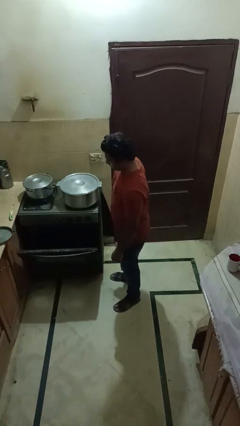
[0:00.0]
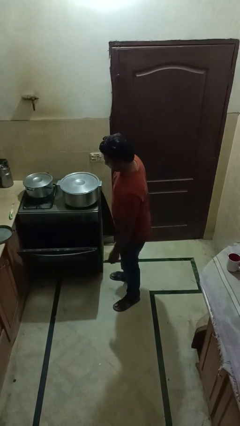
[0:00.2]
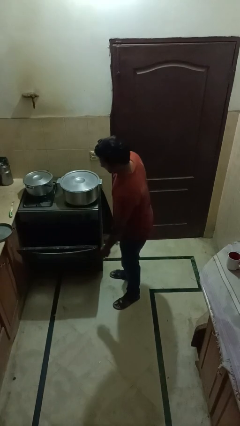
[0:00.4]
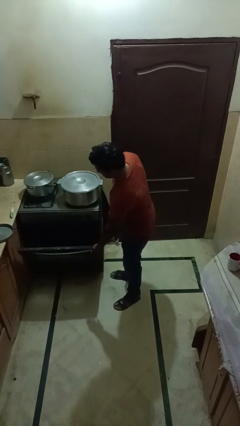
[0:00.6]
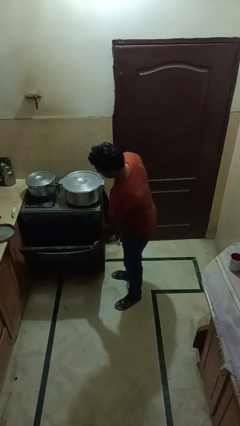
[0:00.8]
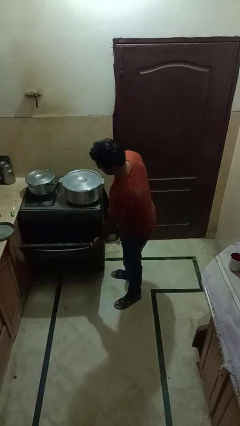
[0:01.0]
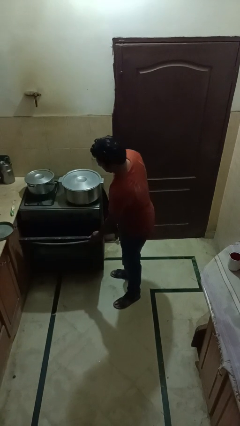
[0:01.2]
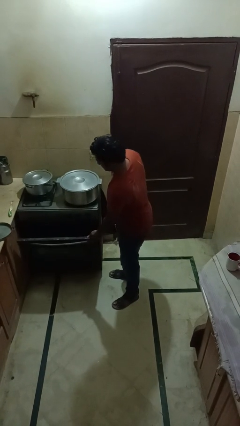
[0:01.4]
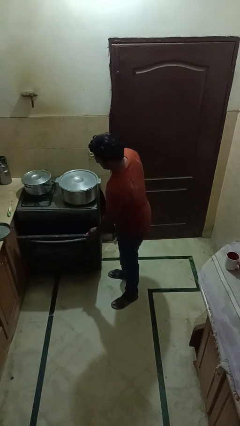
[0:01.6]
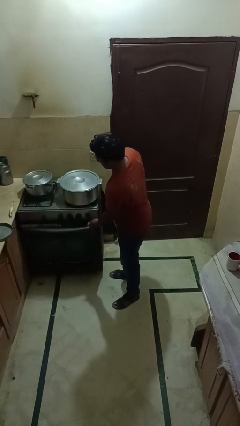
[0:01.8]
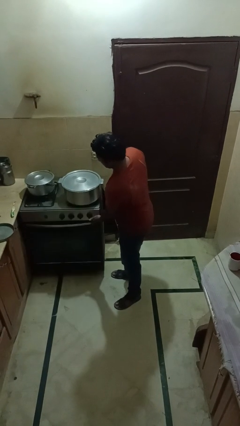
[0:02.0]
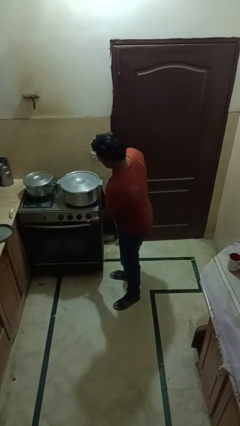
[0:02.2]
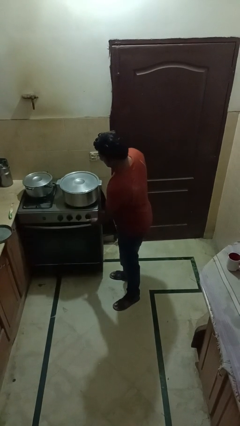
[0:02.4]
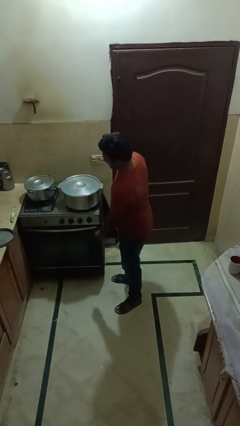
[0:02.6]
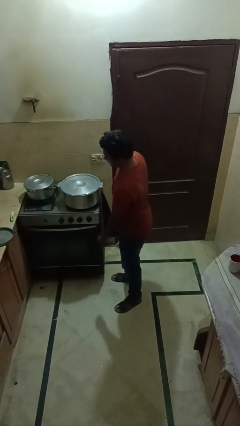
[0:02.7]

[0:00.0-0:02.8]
person closes oven door

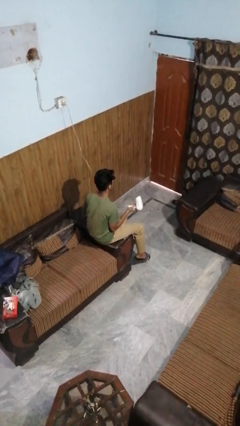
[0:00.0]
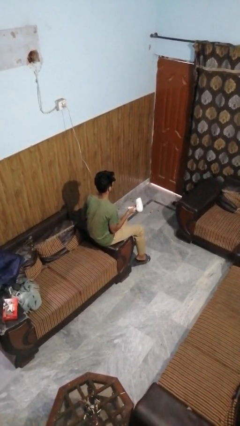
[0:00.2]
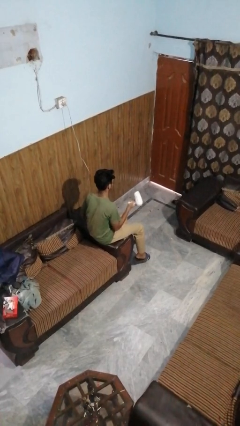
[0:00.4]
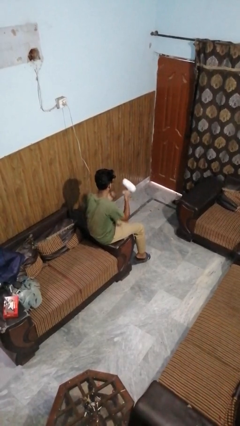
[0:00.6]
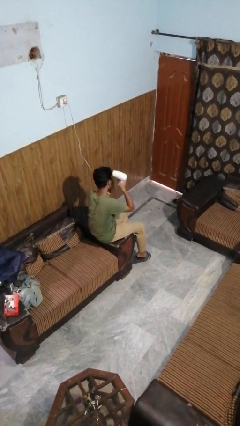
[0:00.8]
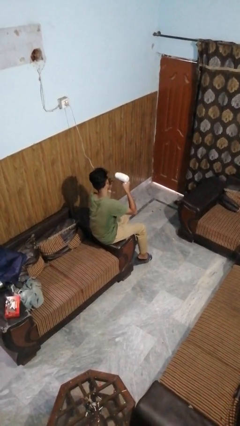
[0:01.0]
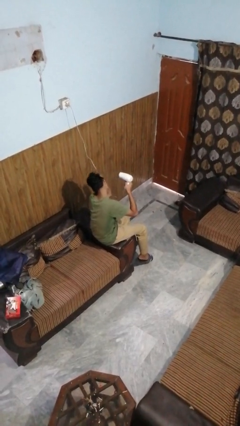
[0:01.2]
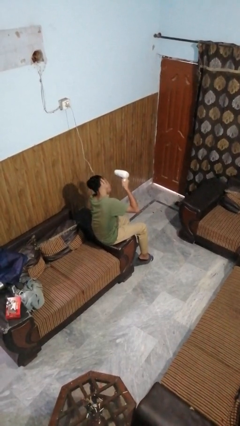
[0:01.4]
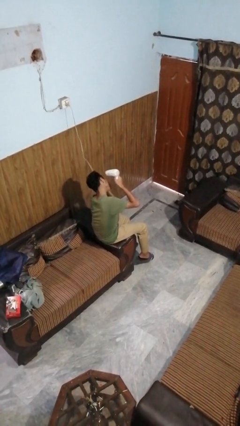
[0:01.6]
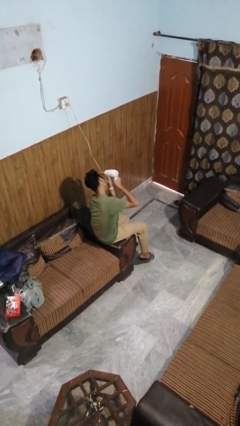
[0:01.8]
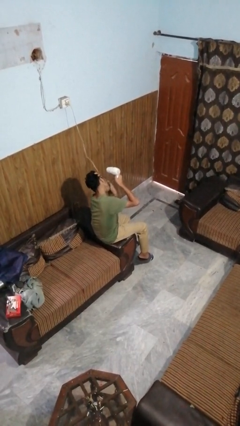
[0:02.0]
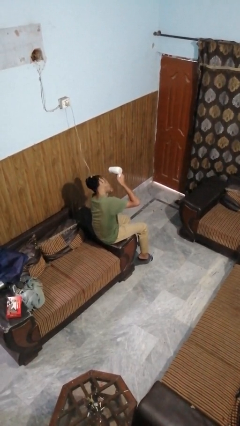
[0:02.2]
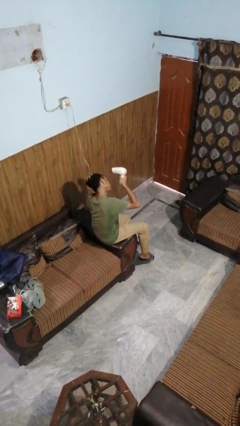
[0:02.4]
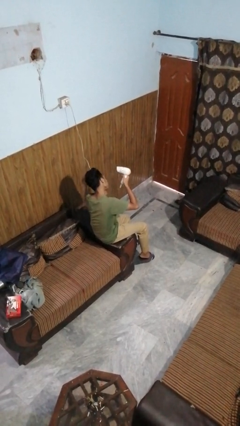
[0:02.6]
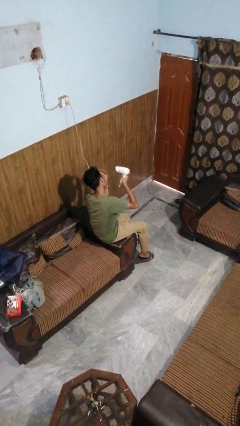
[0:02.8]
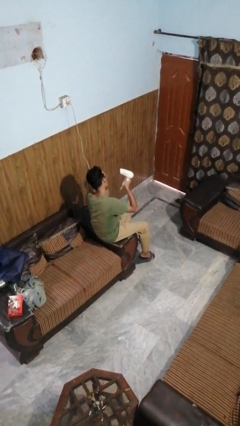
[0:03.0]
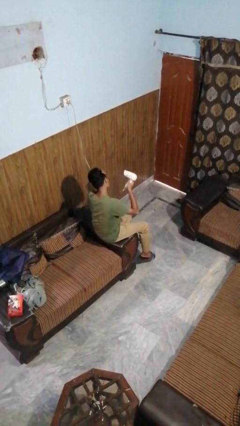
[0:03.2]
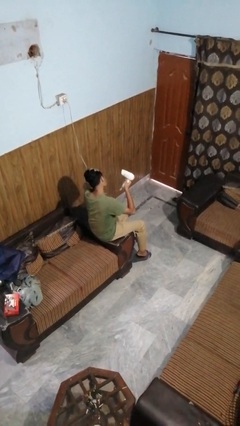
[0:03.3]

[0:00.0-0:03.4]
person dries hair with hairdryer

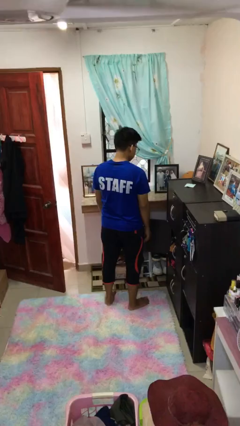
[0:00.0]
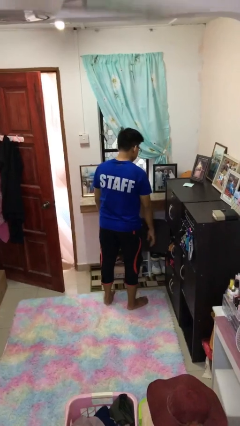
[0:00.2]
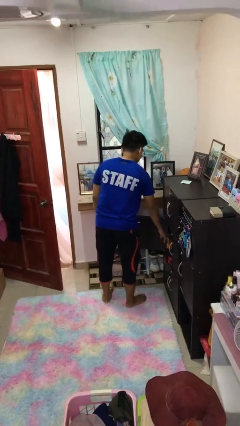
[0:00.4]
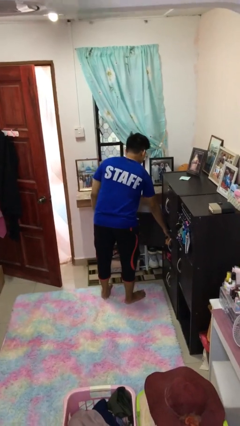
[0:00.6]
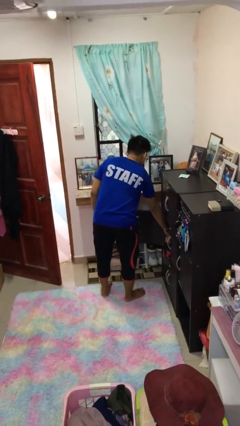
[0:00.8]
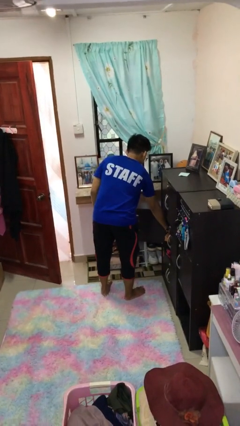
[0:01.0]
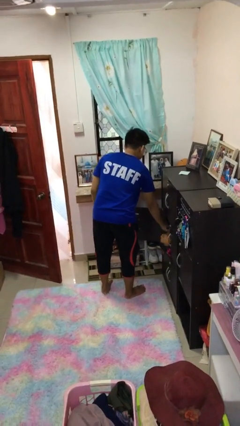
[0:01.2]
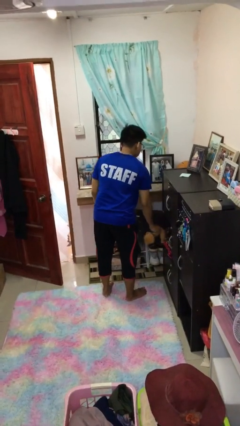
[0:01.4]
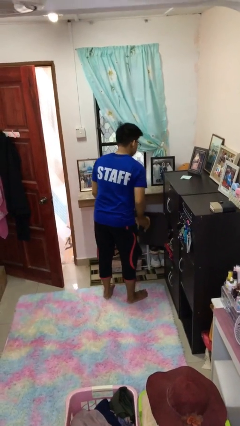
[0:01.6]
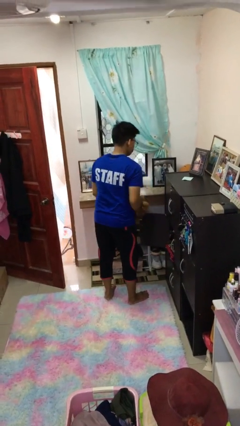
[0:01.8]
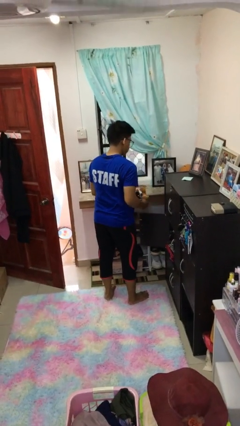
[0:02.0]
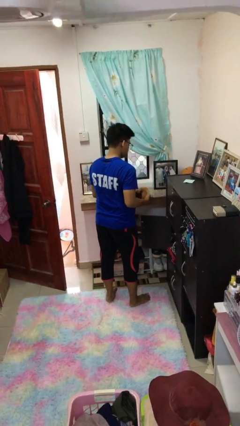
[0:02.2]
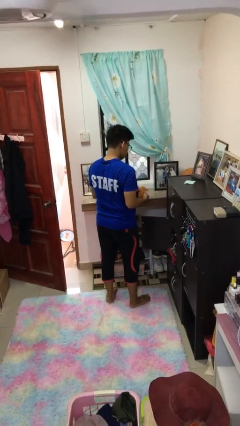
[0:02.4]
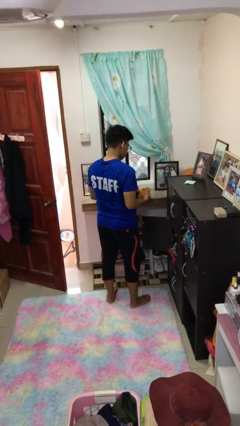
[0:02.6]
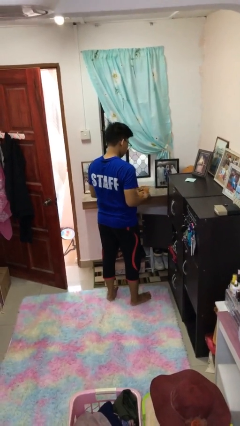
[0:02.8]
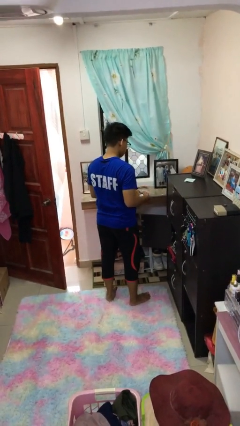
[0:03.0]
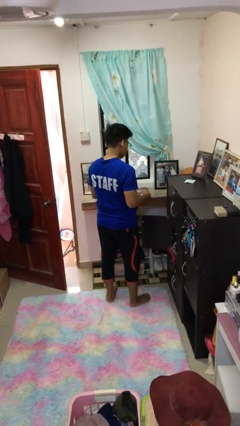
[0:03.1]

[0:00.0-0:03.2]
person picks up object from cabinet

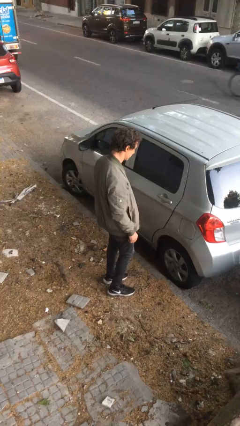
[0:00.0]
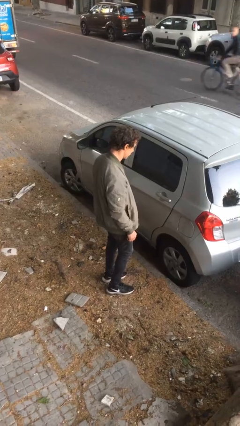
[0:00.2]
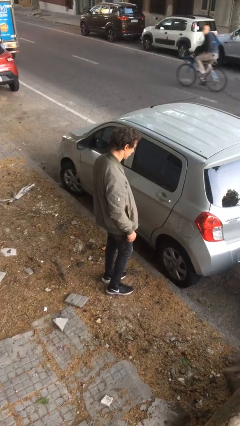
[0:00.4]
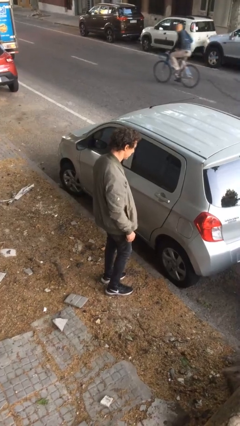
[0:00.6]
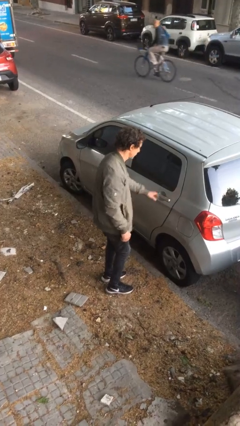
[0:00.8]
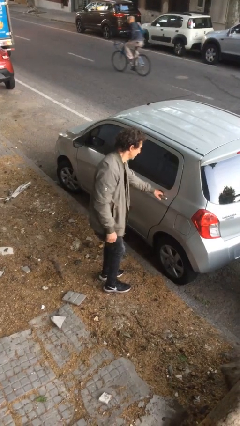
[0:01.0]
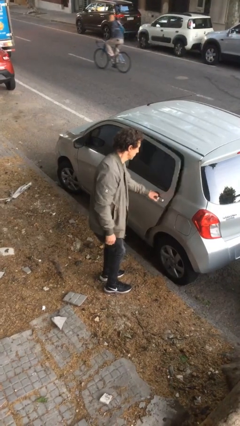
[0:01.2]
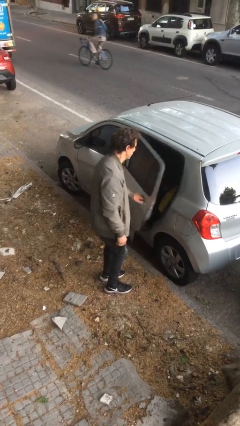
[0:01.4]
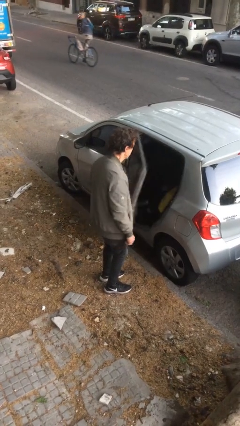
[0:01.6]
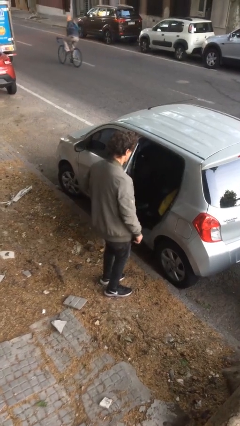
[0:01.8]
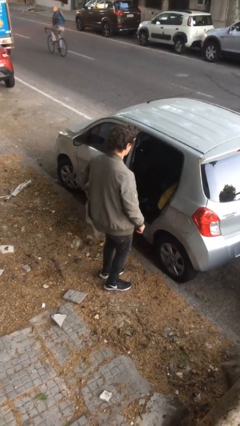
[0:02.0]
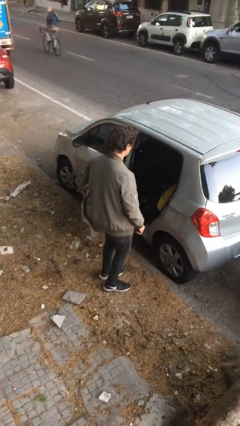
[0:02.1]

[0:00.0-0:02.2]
person opens car door

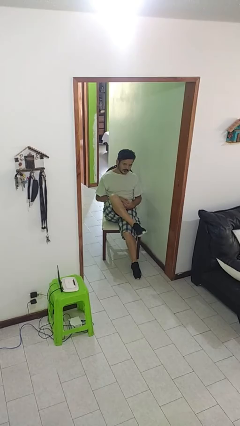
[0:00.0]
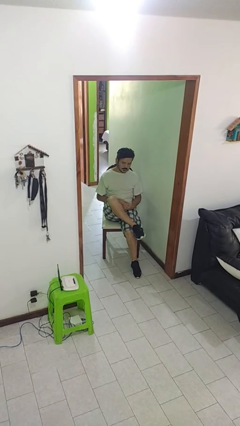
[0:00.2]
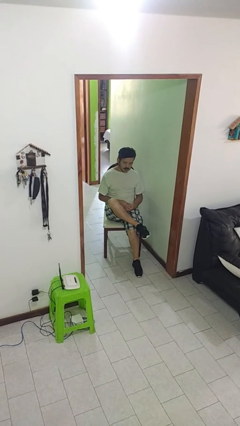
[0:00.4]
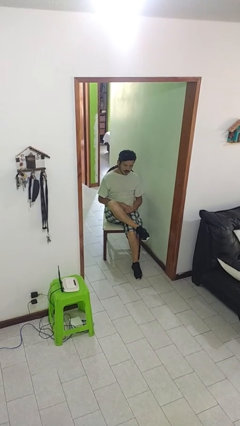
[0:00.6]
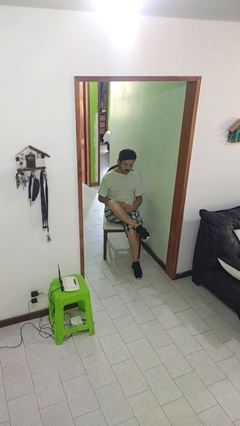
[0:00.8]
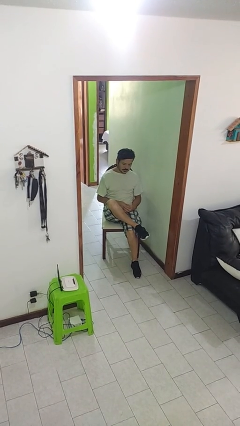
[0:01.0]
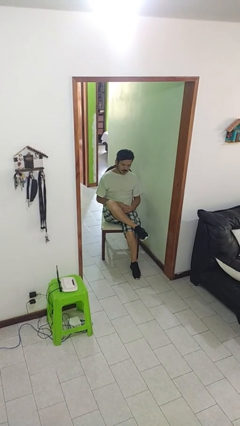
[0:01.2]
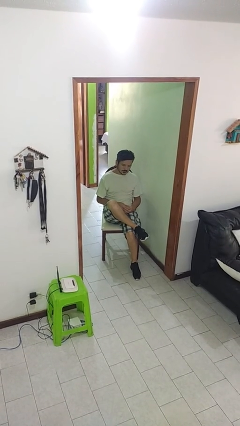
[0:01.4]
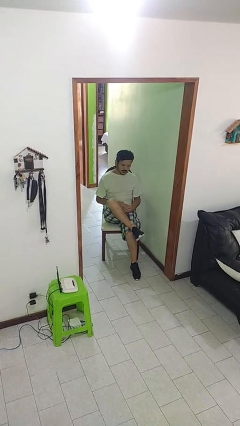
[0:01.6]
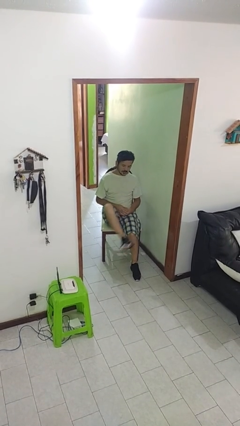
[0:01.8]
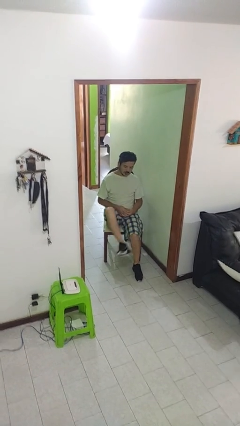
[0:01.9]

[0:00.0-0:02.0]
person crosses legs

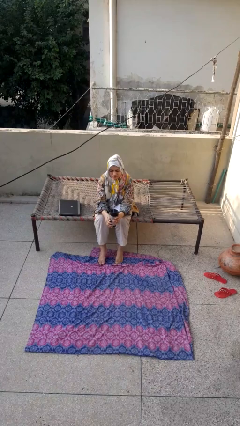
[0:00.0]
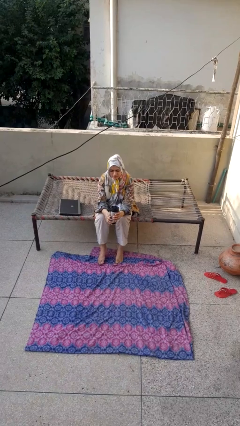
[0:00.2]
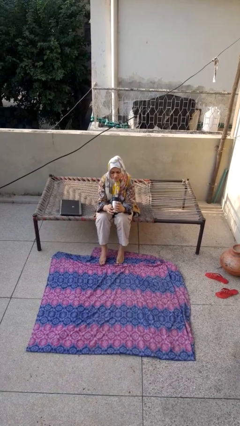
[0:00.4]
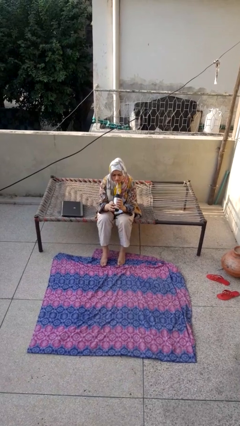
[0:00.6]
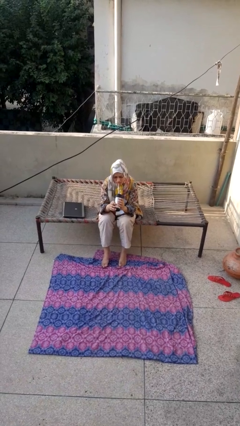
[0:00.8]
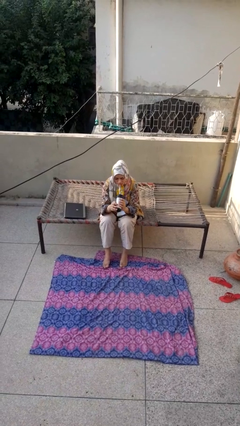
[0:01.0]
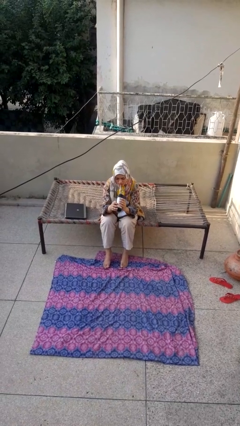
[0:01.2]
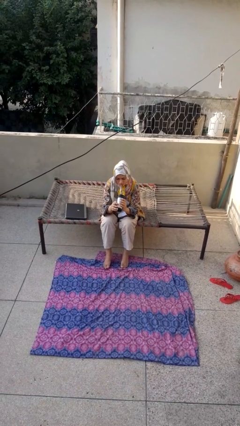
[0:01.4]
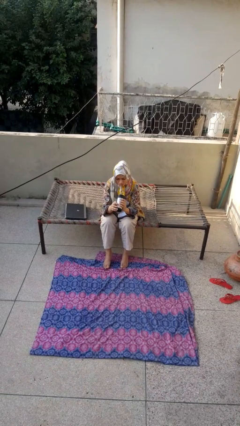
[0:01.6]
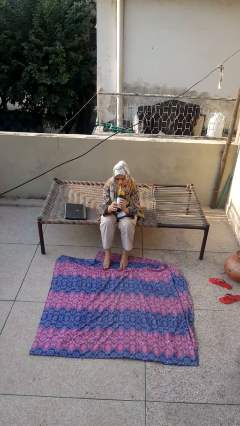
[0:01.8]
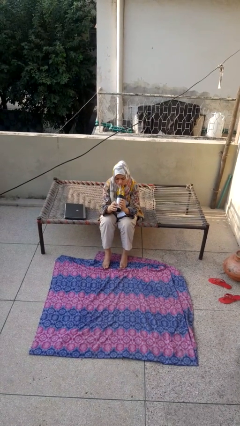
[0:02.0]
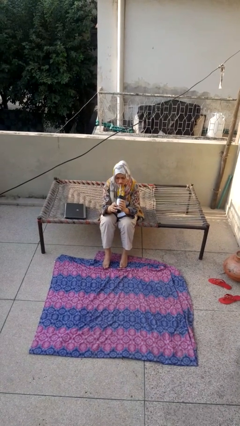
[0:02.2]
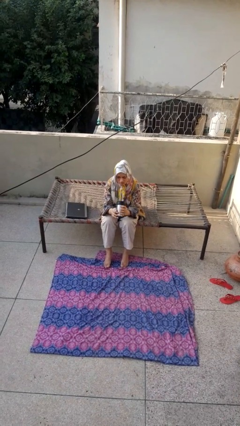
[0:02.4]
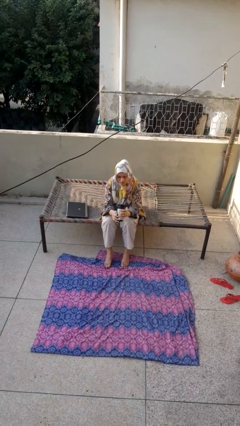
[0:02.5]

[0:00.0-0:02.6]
person drinks from straw

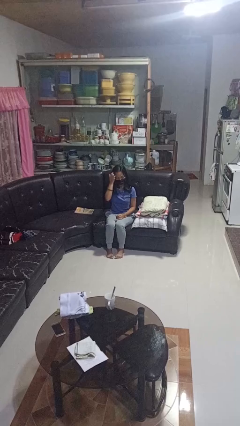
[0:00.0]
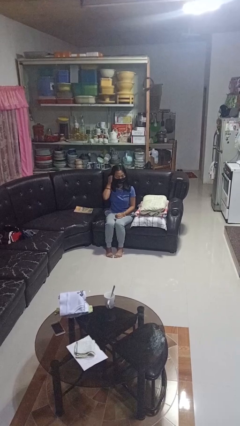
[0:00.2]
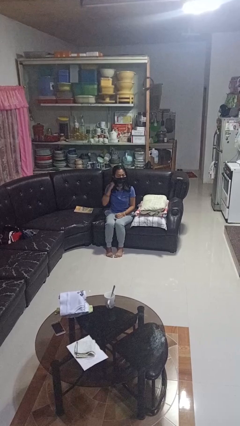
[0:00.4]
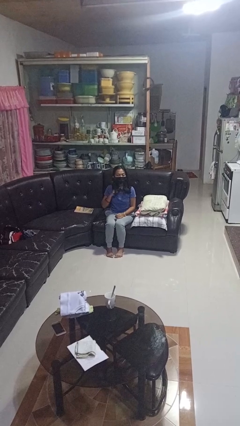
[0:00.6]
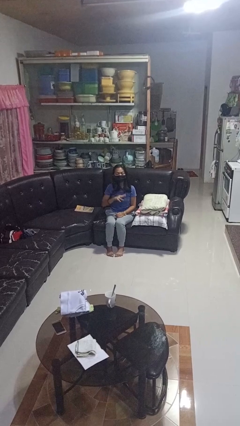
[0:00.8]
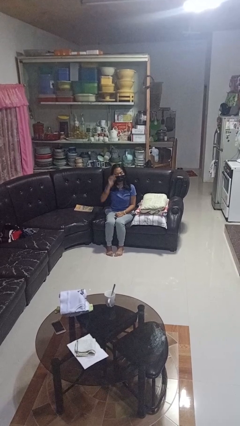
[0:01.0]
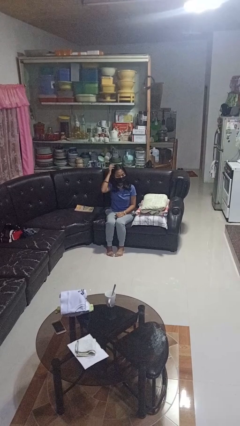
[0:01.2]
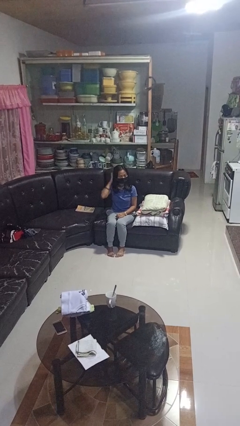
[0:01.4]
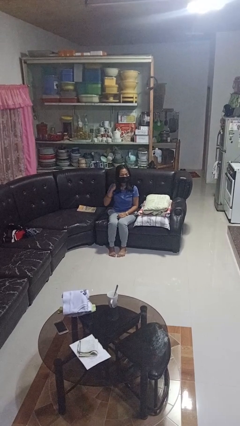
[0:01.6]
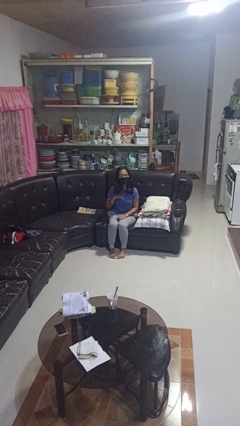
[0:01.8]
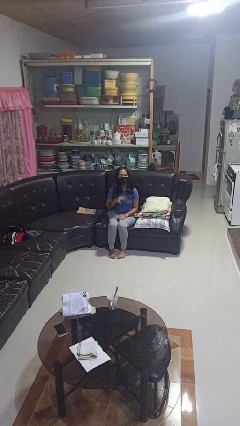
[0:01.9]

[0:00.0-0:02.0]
person strokes hair
